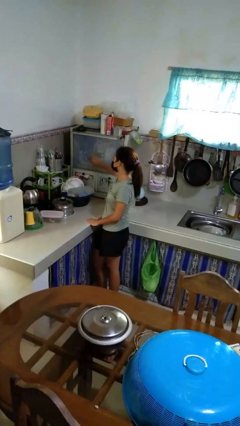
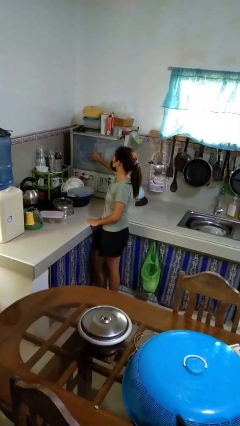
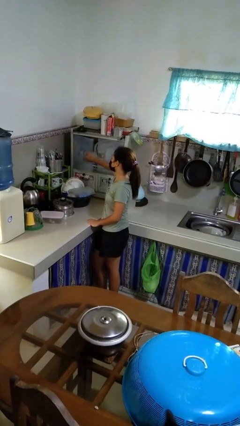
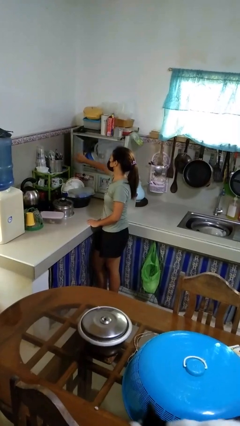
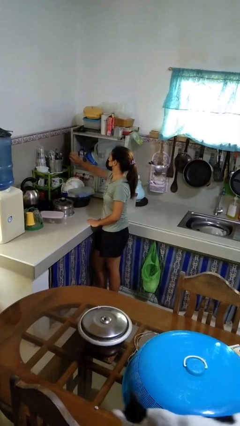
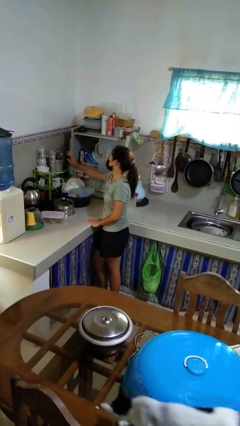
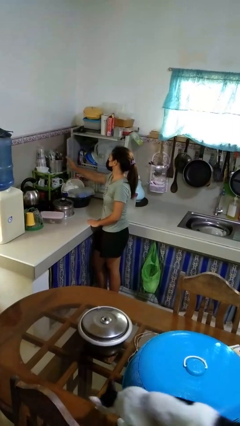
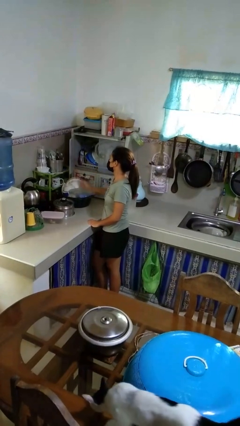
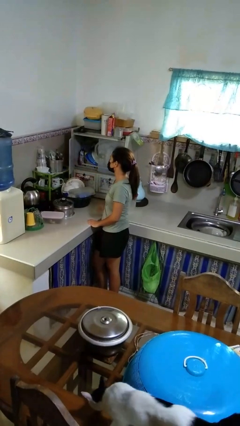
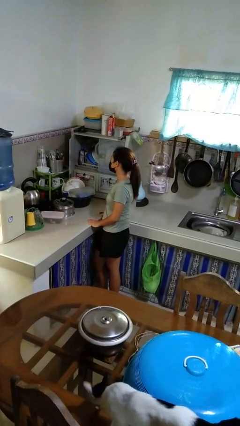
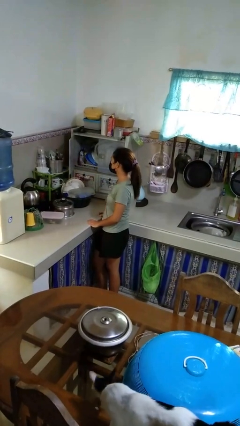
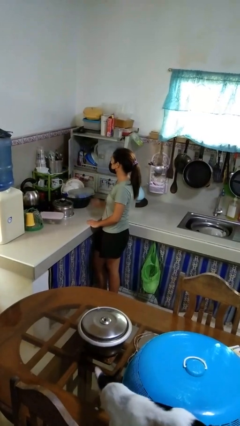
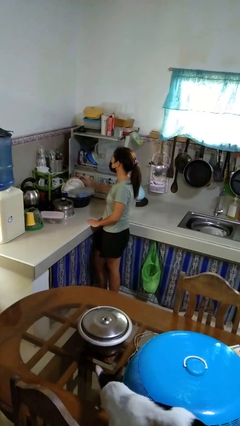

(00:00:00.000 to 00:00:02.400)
person opens kitchen drawer

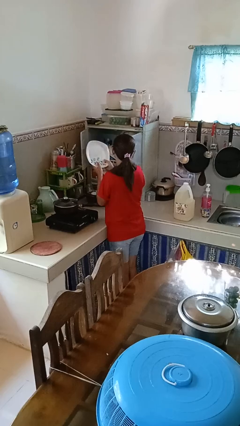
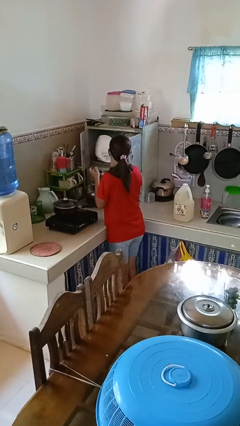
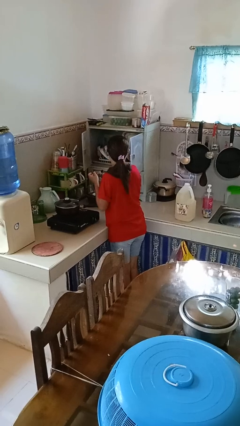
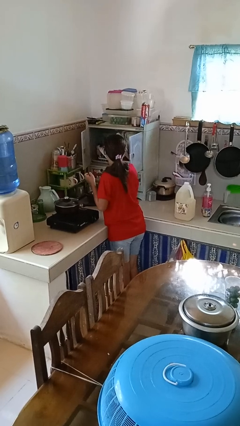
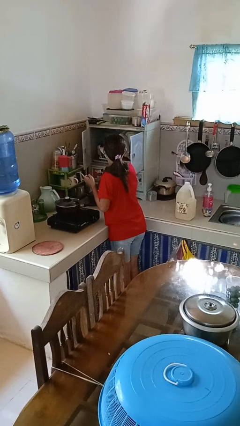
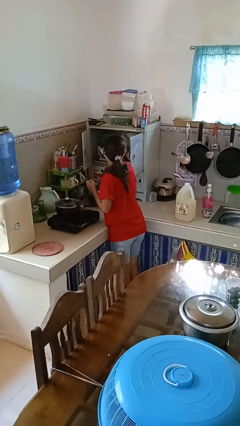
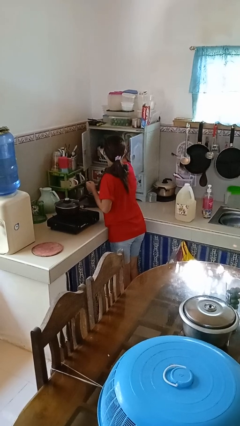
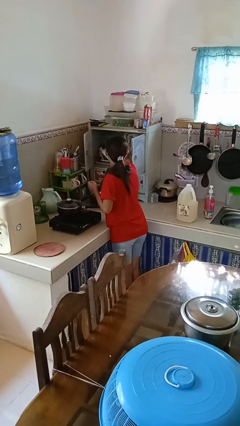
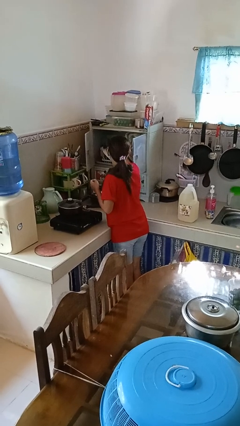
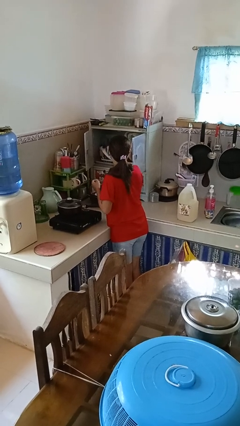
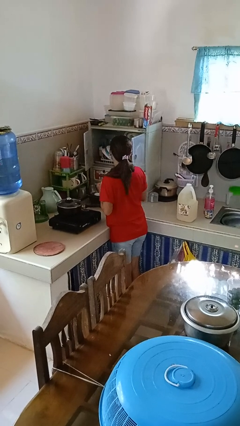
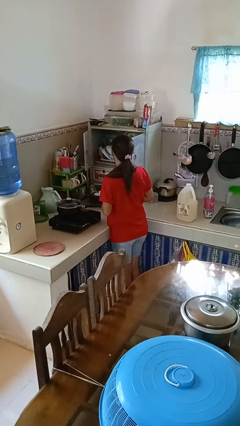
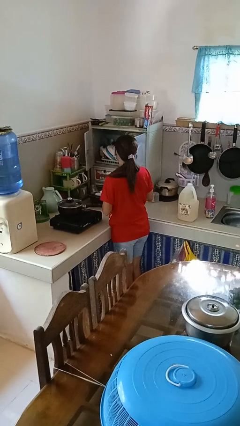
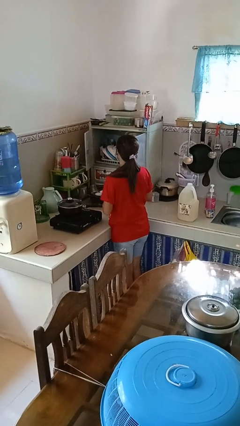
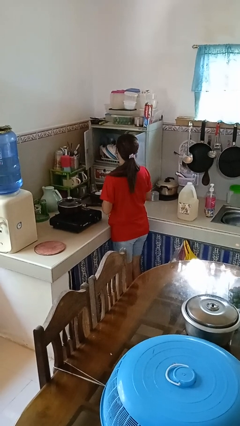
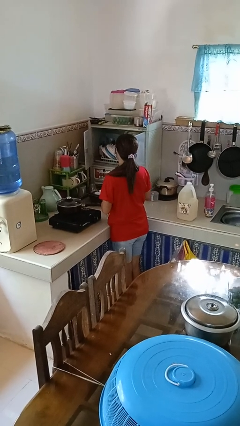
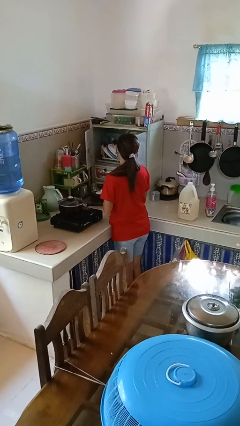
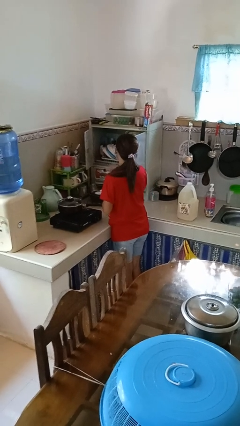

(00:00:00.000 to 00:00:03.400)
person puts object in cabinet

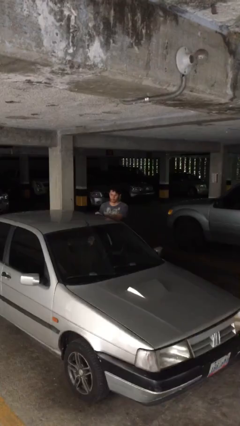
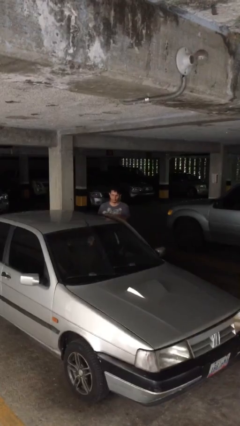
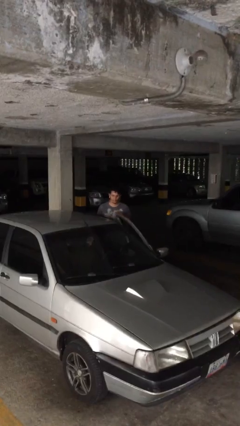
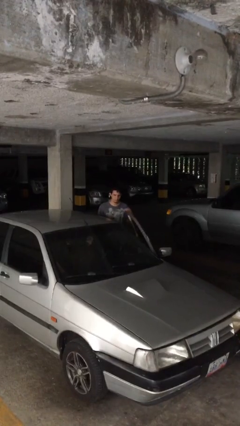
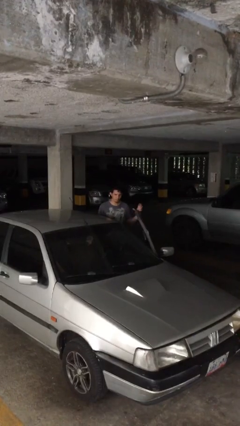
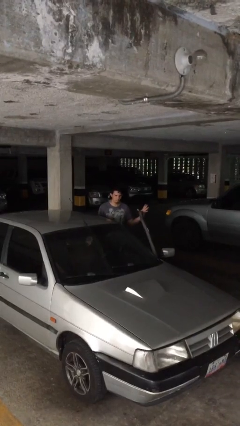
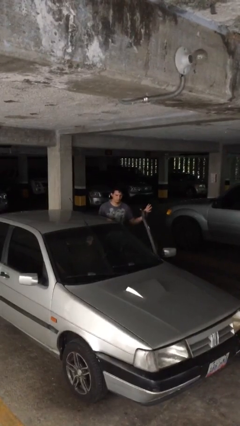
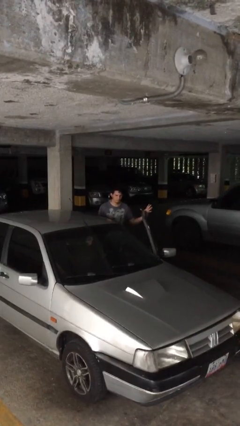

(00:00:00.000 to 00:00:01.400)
person opens car door

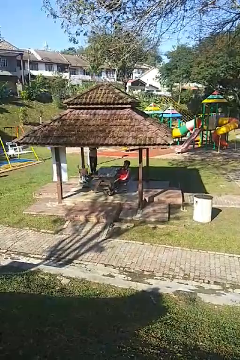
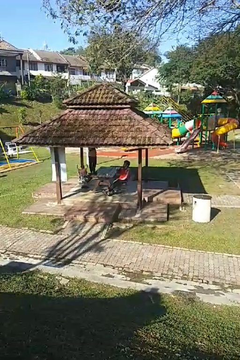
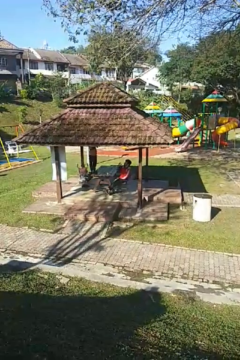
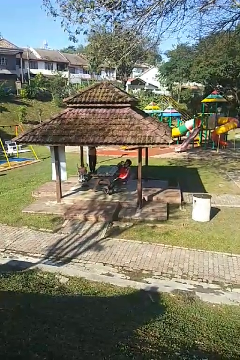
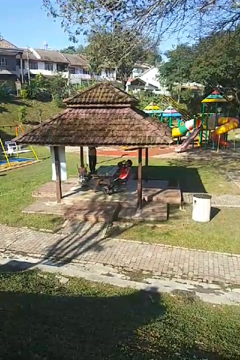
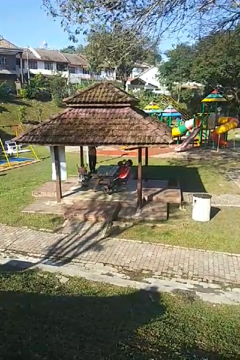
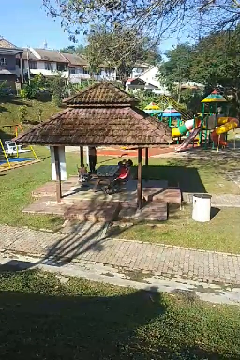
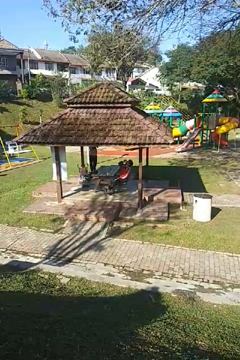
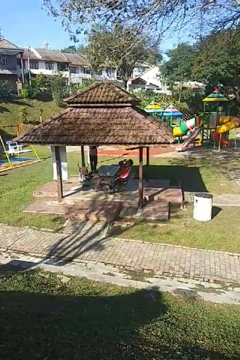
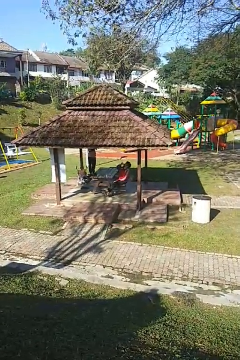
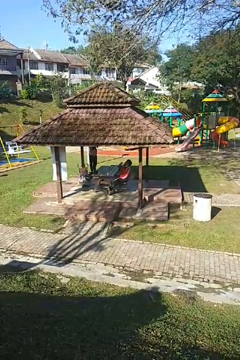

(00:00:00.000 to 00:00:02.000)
person drinks from shotglass

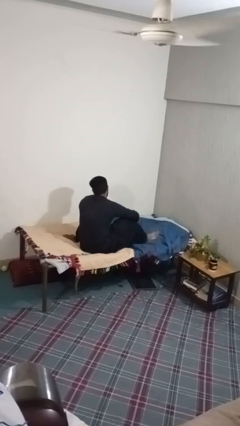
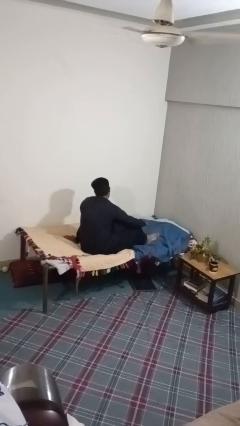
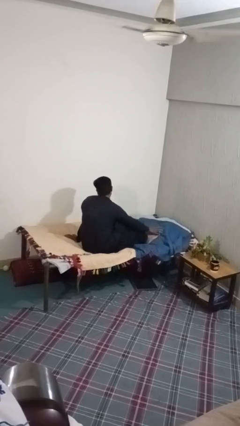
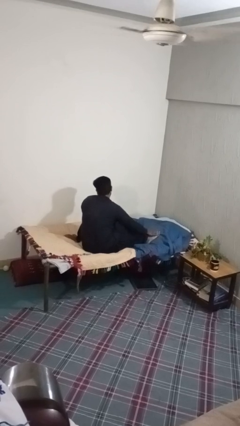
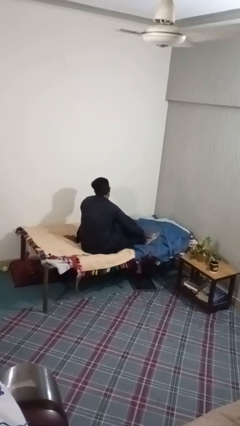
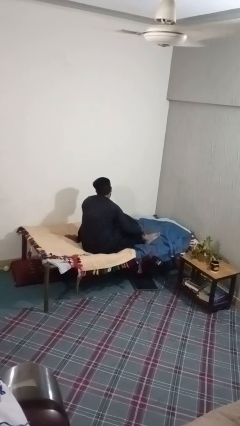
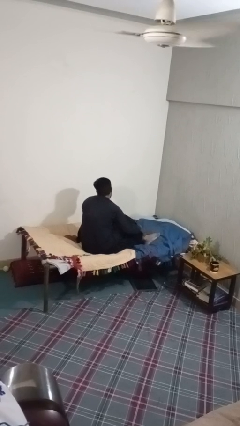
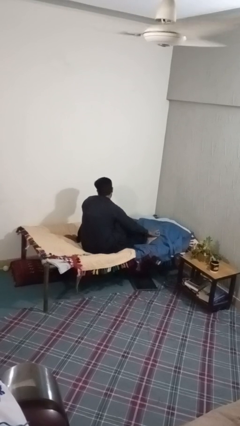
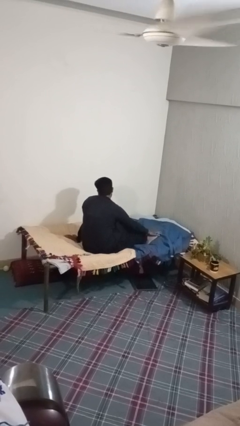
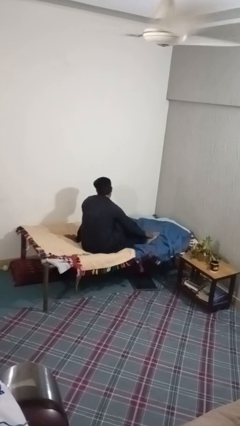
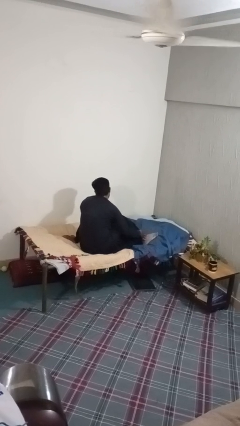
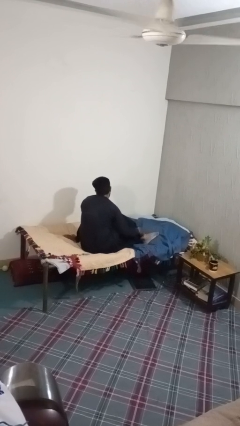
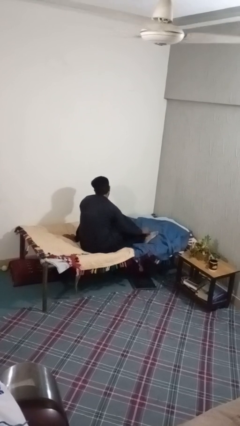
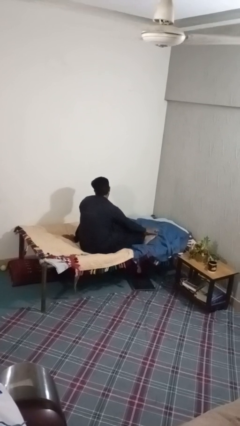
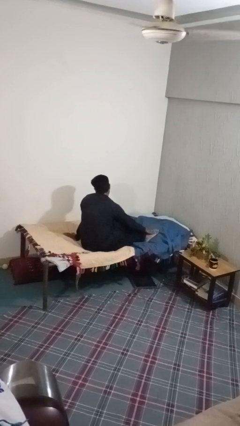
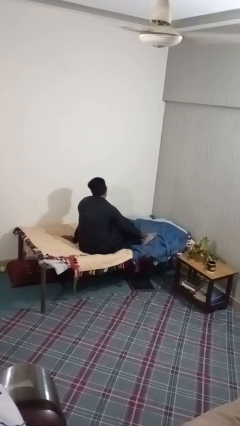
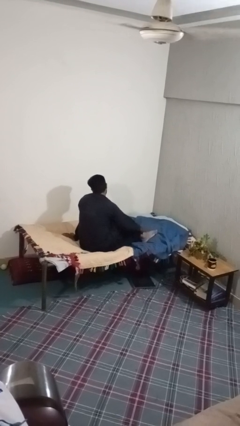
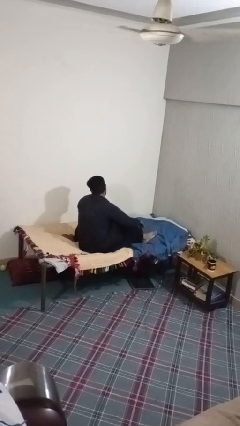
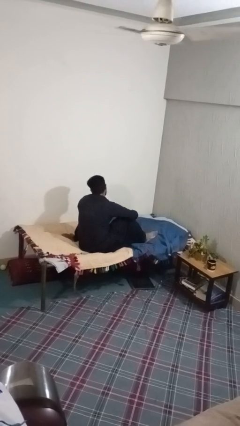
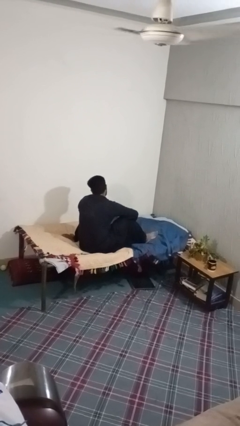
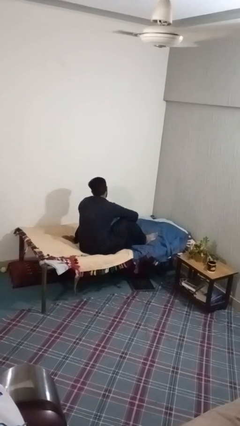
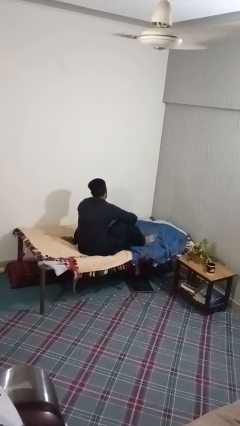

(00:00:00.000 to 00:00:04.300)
person rubs foot

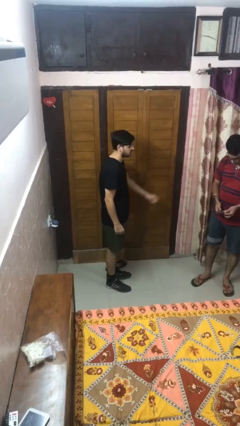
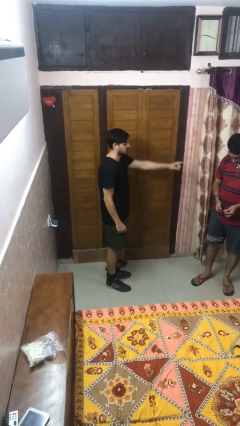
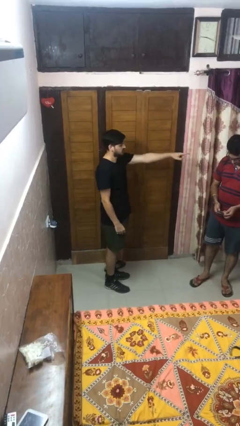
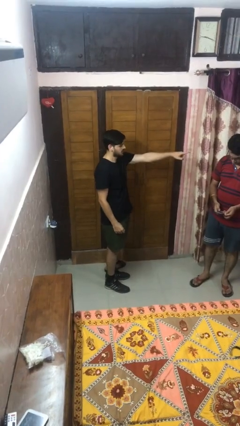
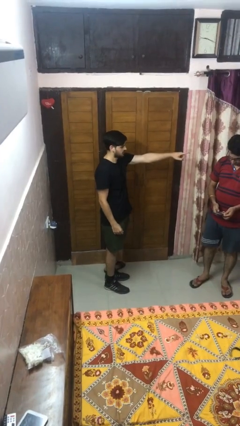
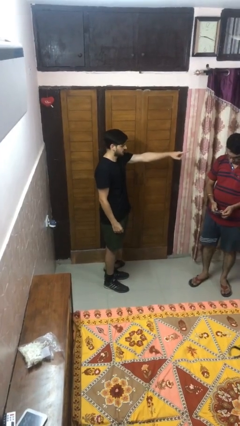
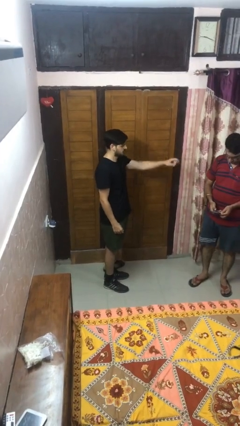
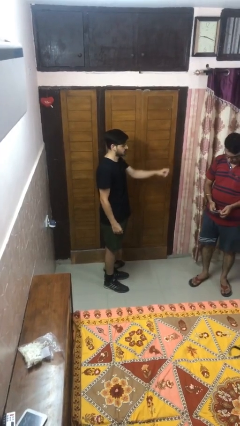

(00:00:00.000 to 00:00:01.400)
person points at person

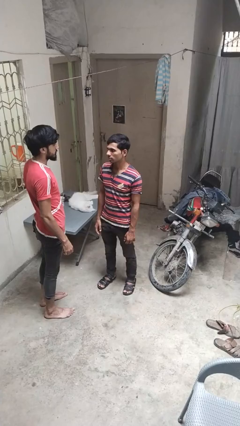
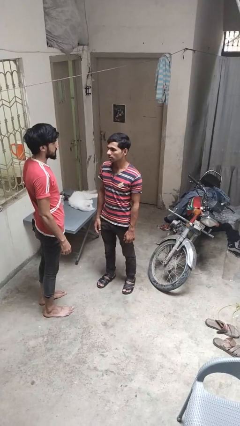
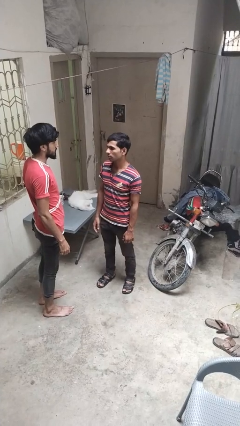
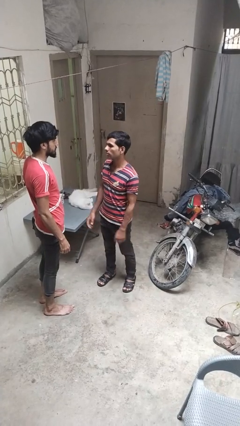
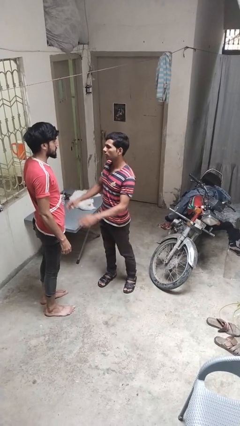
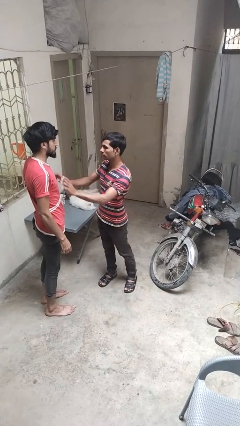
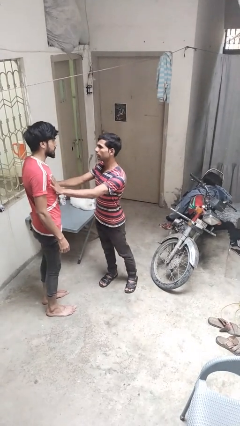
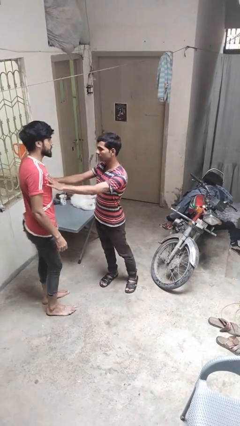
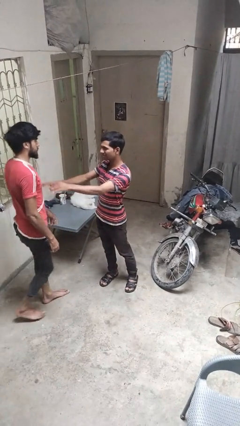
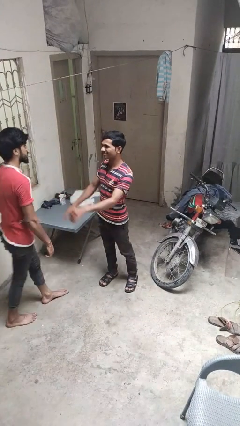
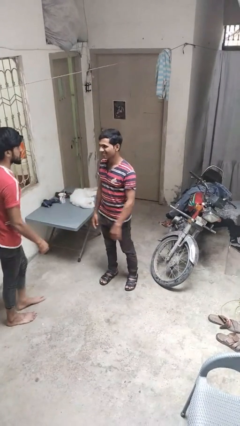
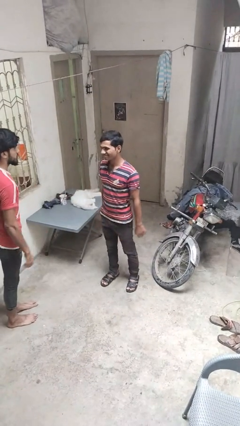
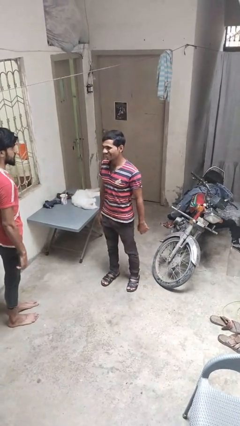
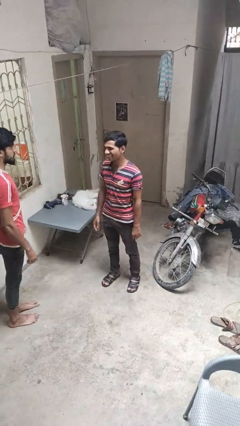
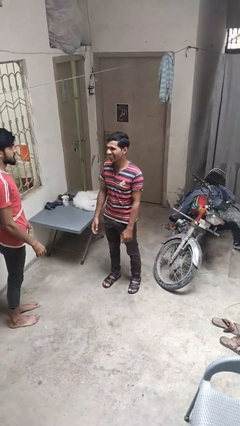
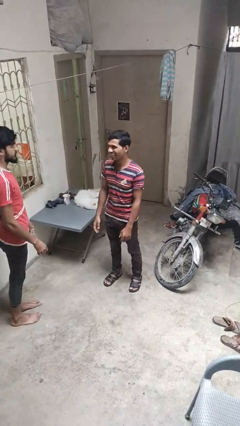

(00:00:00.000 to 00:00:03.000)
person shoves person
